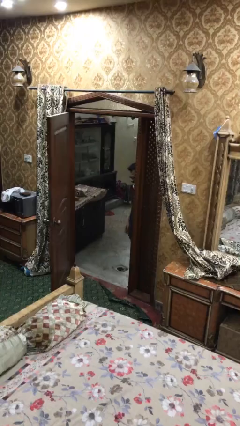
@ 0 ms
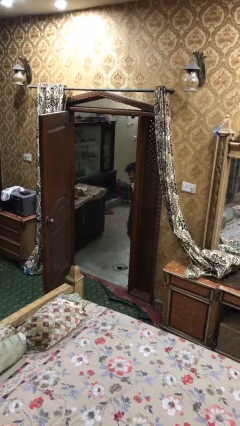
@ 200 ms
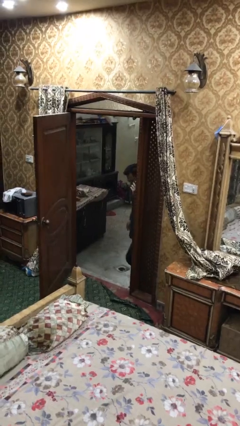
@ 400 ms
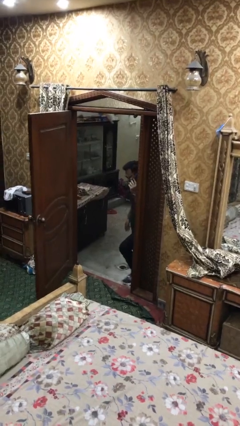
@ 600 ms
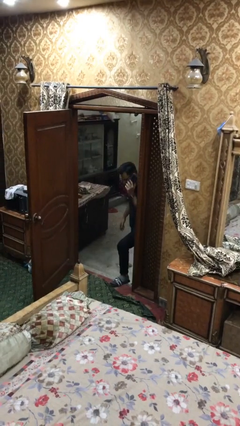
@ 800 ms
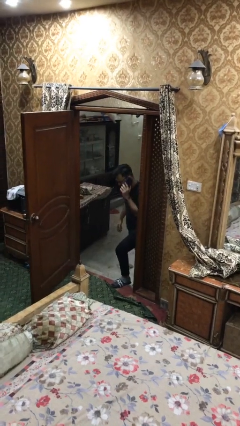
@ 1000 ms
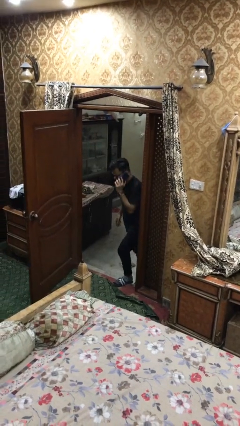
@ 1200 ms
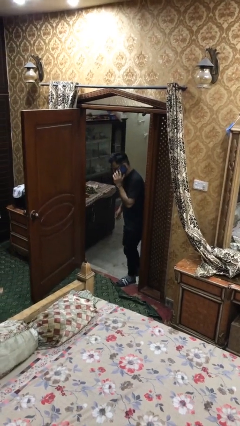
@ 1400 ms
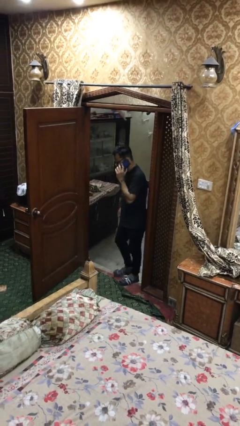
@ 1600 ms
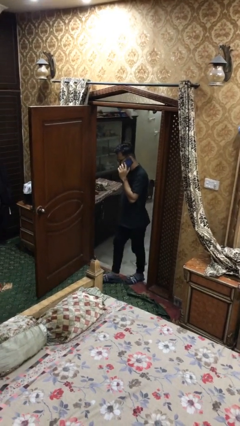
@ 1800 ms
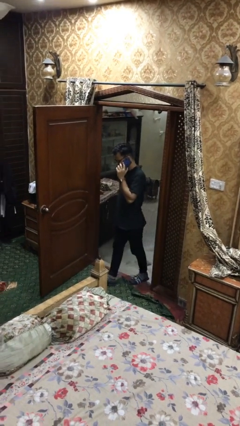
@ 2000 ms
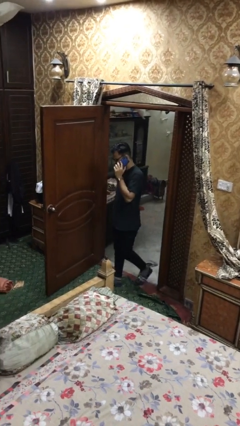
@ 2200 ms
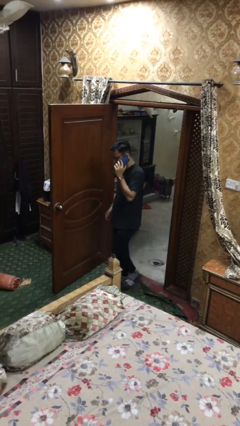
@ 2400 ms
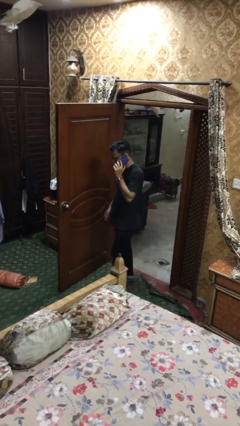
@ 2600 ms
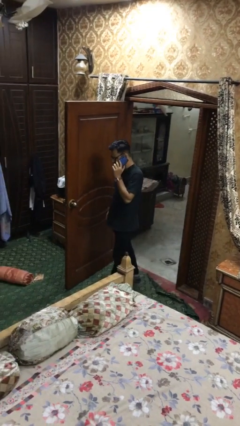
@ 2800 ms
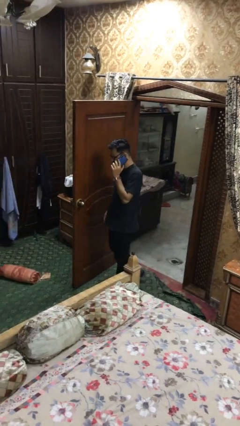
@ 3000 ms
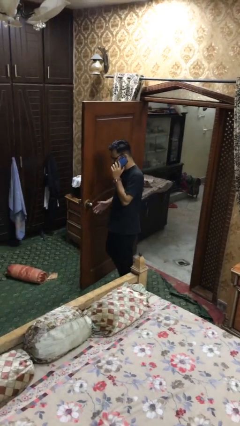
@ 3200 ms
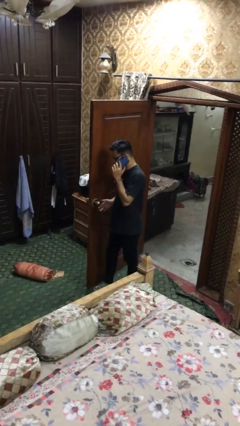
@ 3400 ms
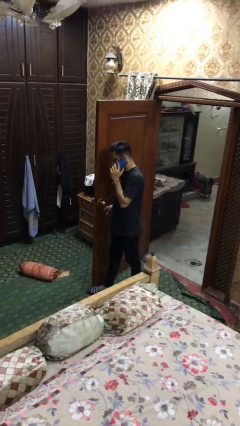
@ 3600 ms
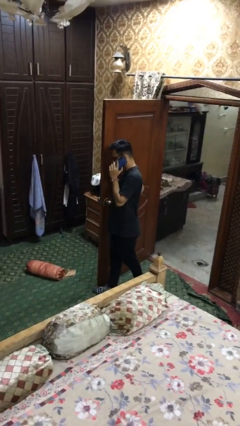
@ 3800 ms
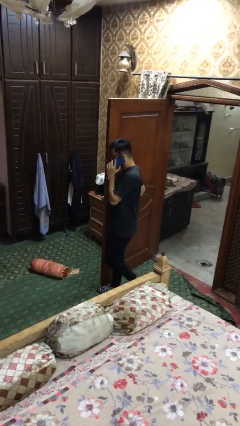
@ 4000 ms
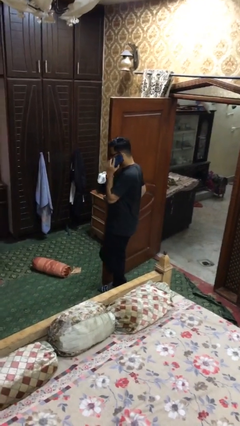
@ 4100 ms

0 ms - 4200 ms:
person enters scene through structure

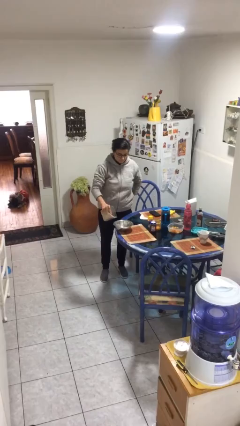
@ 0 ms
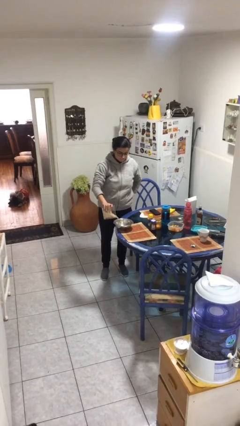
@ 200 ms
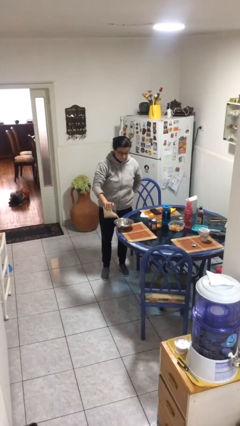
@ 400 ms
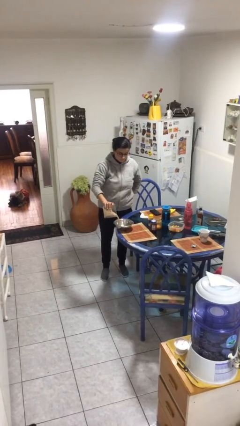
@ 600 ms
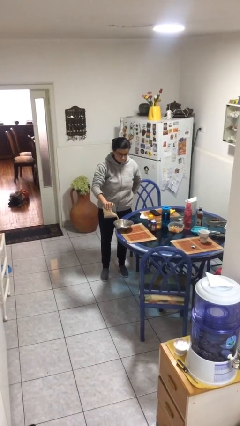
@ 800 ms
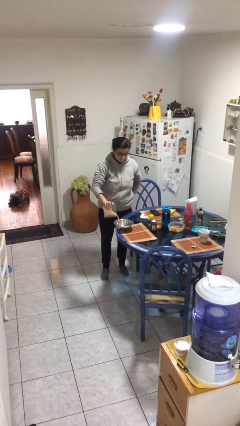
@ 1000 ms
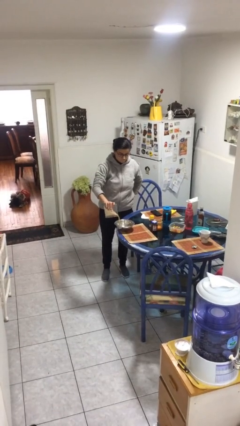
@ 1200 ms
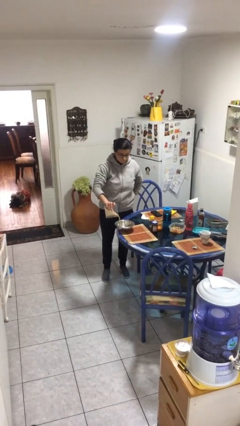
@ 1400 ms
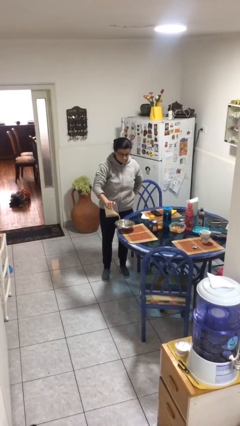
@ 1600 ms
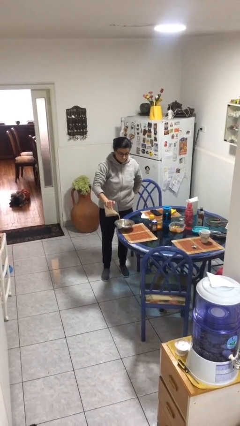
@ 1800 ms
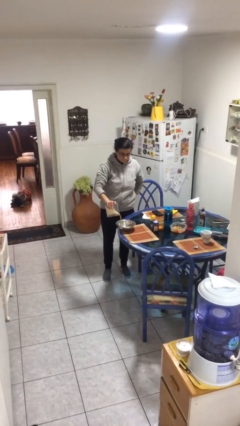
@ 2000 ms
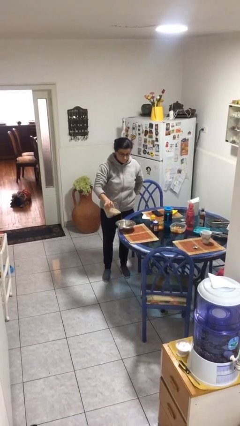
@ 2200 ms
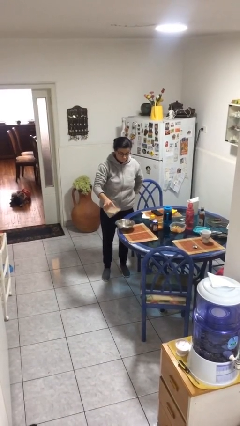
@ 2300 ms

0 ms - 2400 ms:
person pours into bowl

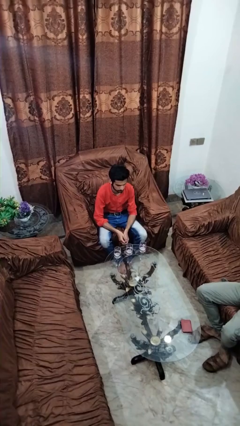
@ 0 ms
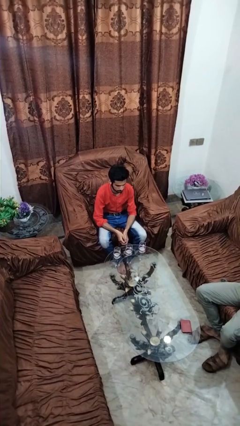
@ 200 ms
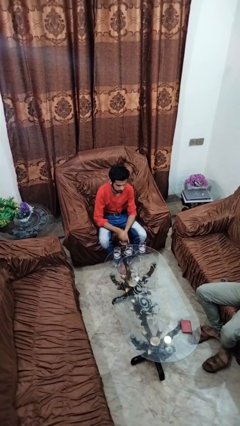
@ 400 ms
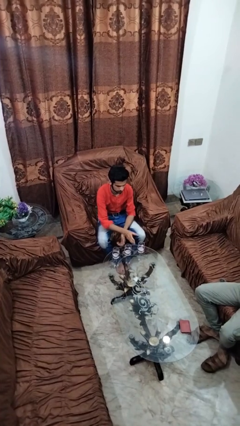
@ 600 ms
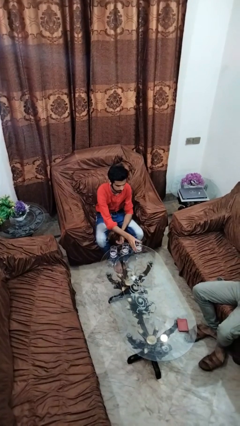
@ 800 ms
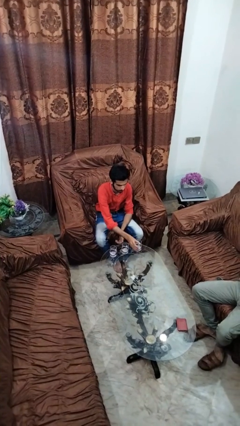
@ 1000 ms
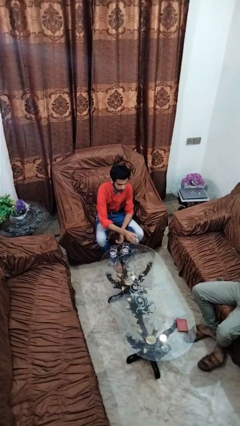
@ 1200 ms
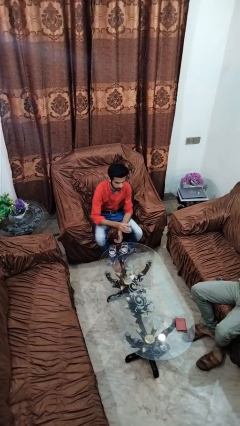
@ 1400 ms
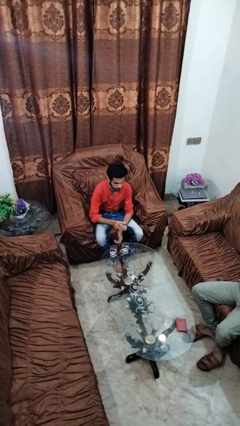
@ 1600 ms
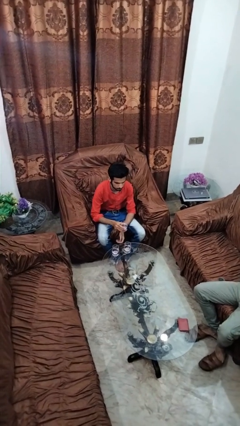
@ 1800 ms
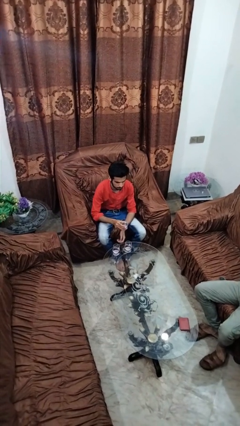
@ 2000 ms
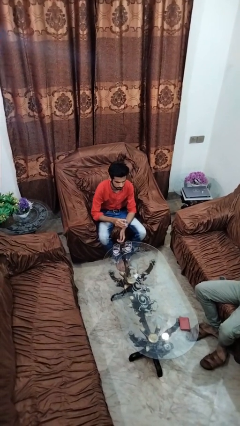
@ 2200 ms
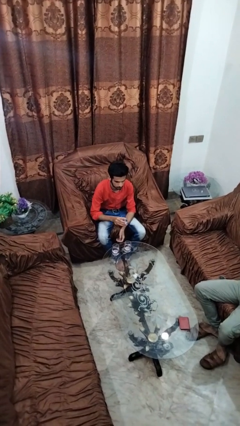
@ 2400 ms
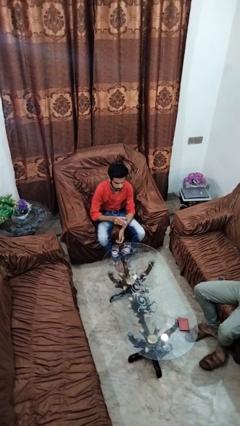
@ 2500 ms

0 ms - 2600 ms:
person picks up object from table

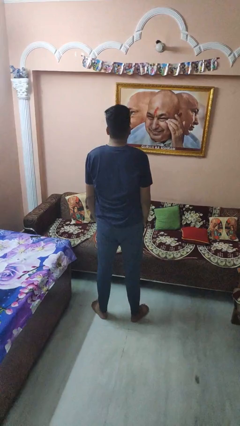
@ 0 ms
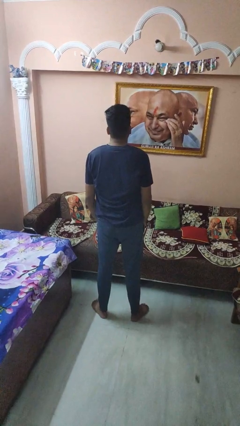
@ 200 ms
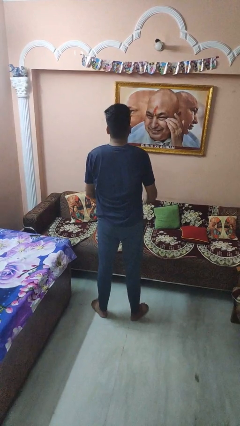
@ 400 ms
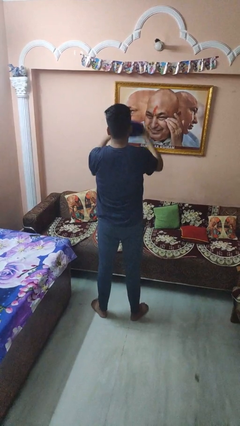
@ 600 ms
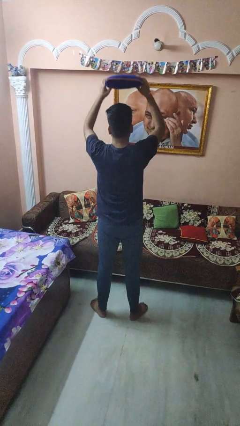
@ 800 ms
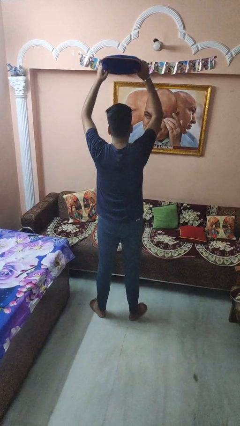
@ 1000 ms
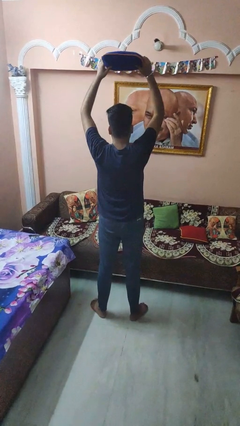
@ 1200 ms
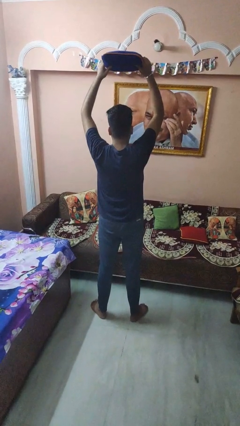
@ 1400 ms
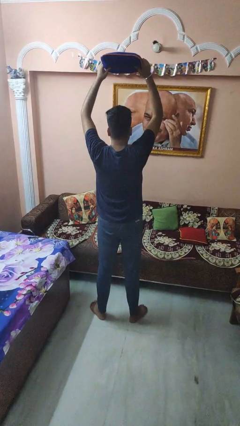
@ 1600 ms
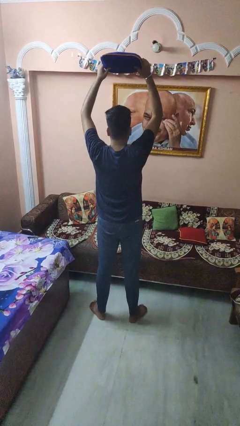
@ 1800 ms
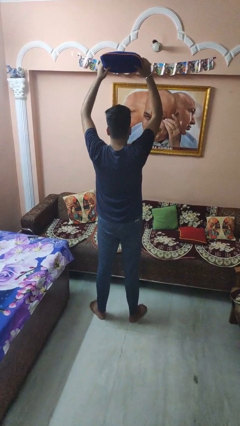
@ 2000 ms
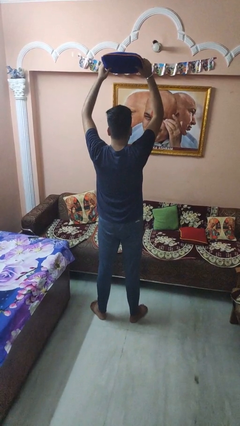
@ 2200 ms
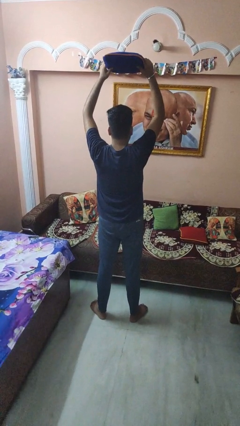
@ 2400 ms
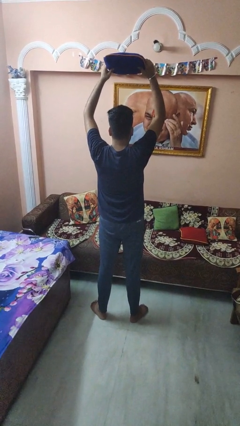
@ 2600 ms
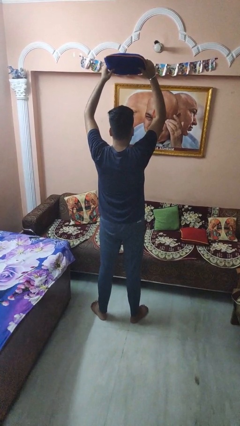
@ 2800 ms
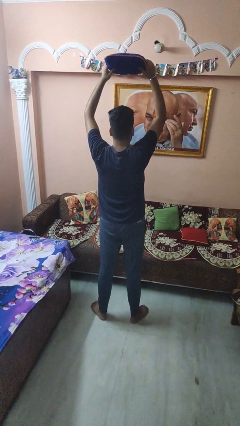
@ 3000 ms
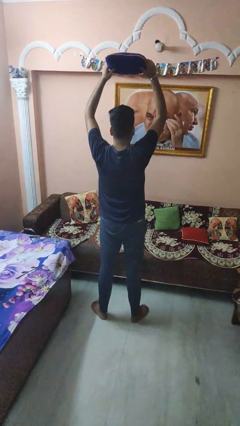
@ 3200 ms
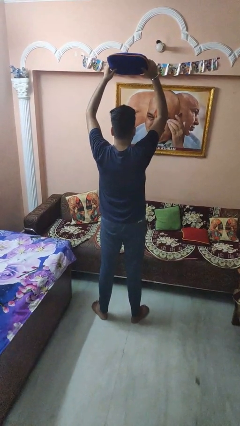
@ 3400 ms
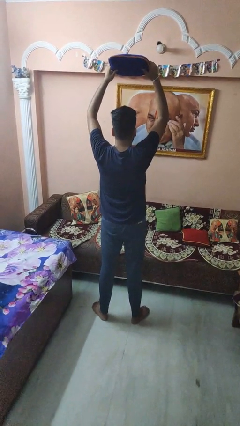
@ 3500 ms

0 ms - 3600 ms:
person holds object above head

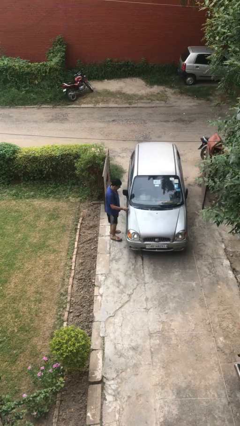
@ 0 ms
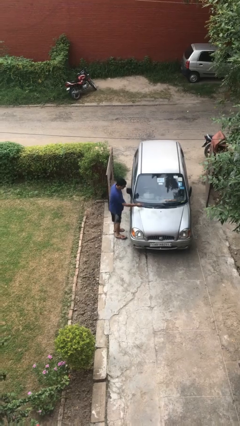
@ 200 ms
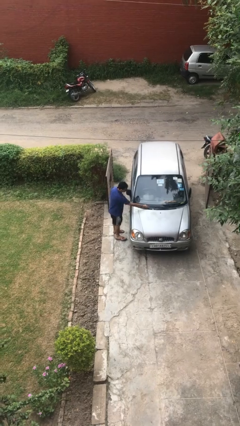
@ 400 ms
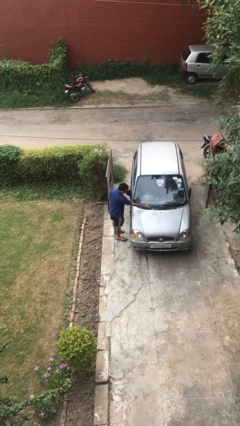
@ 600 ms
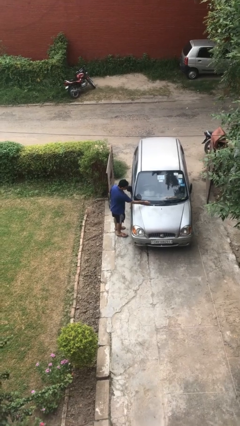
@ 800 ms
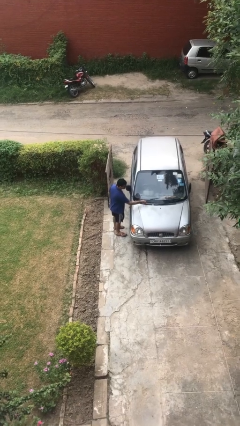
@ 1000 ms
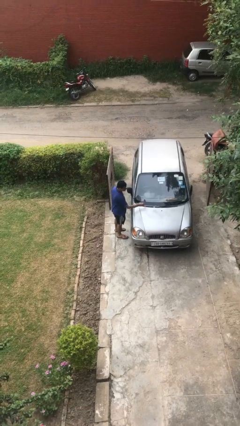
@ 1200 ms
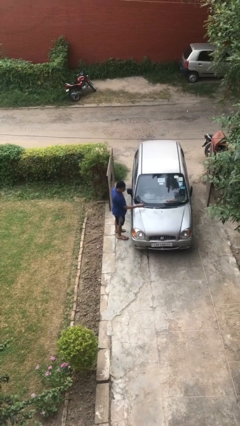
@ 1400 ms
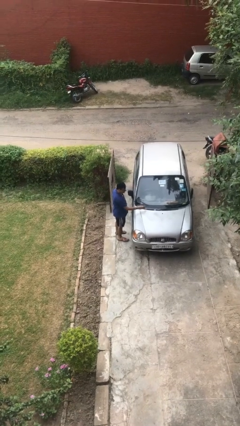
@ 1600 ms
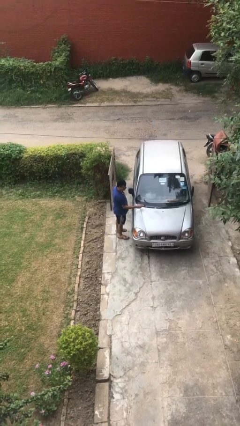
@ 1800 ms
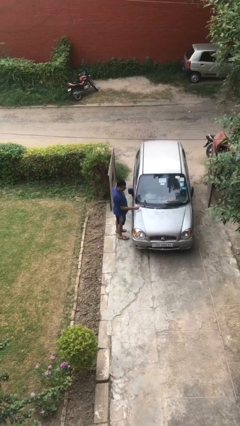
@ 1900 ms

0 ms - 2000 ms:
person flips up car wipers

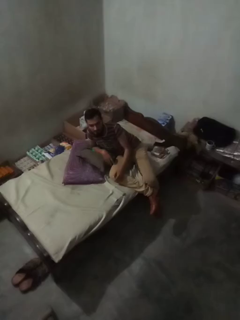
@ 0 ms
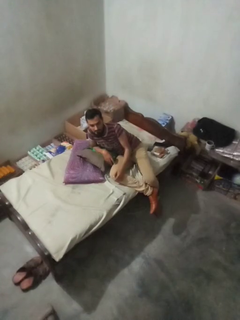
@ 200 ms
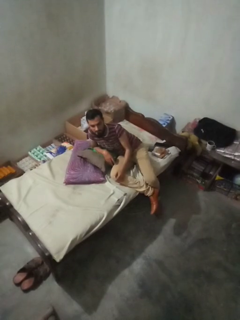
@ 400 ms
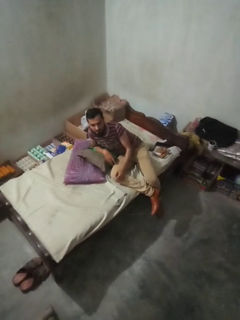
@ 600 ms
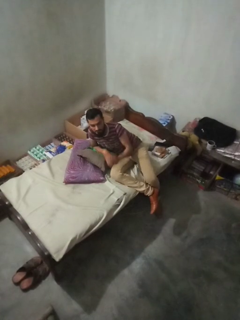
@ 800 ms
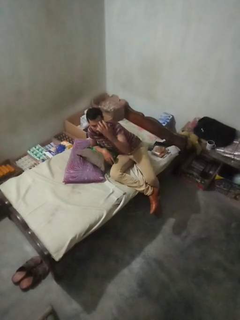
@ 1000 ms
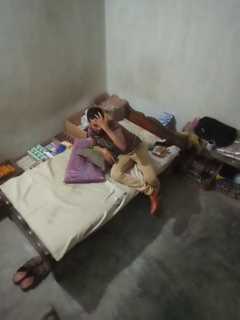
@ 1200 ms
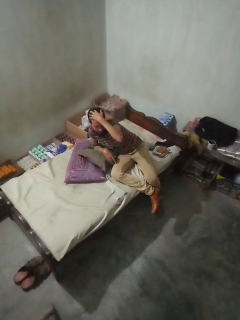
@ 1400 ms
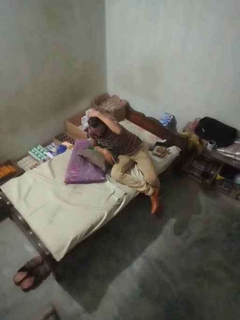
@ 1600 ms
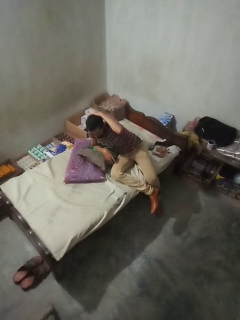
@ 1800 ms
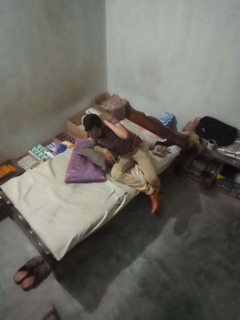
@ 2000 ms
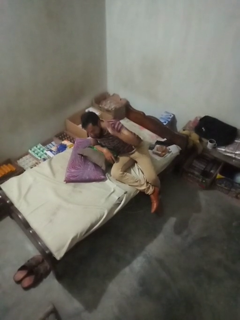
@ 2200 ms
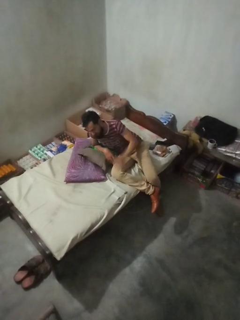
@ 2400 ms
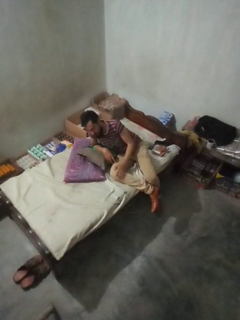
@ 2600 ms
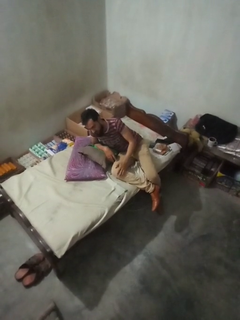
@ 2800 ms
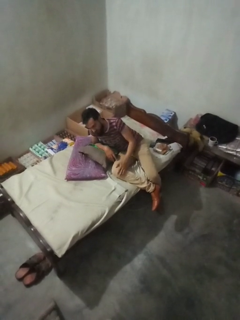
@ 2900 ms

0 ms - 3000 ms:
person strokes hair

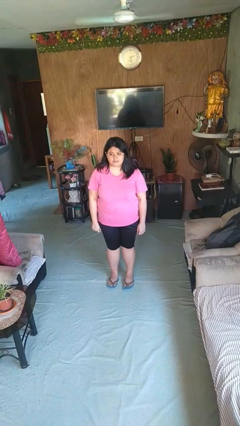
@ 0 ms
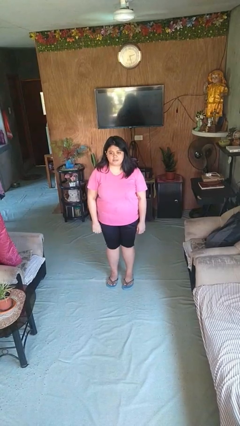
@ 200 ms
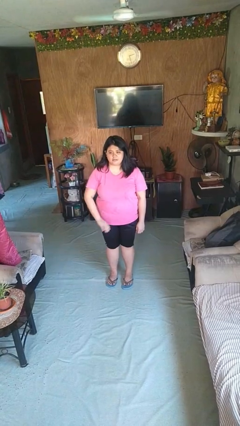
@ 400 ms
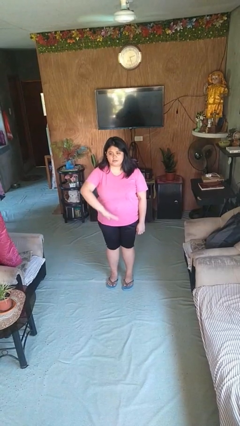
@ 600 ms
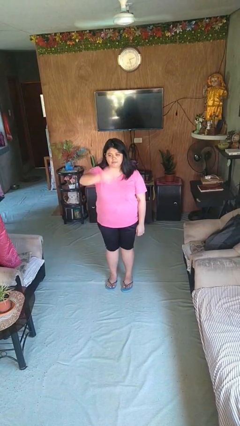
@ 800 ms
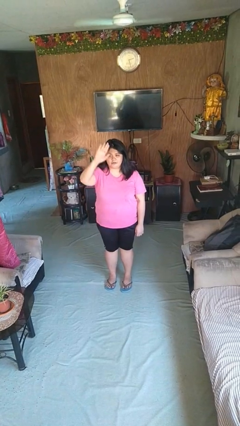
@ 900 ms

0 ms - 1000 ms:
person gestures swipe up
